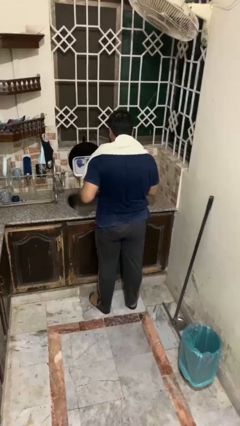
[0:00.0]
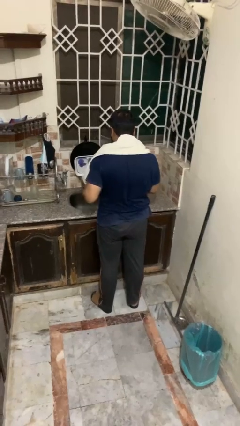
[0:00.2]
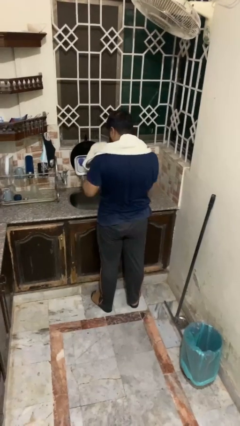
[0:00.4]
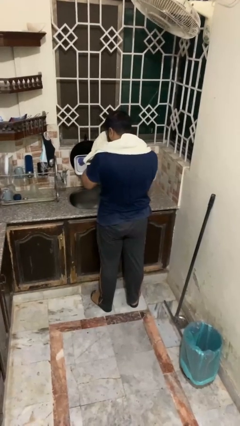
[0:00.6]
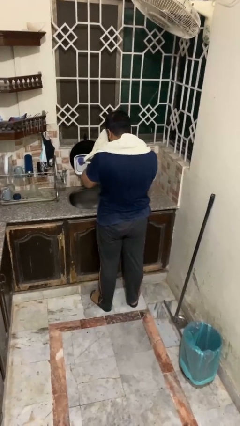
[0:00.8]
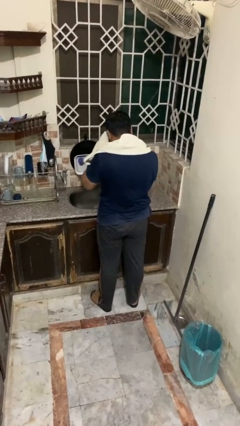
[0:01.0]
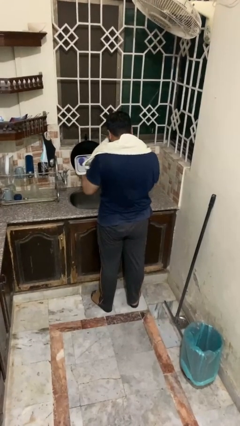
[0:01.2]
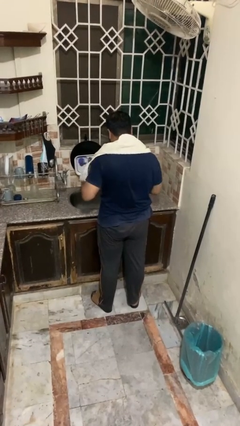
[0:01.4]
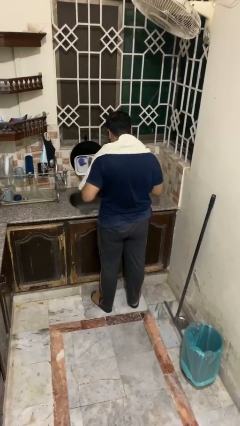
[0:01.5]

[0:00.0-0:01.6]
person dries face with towel

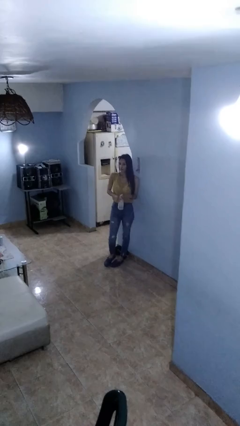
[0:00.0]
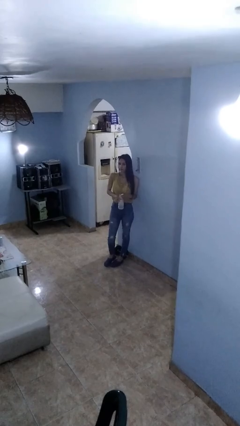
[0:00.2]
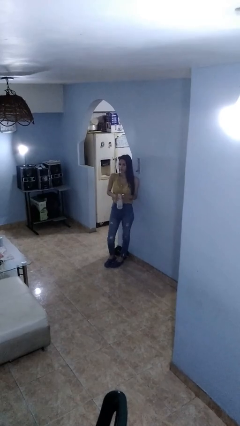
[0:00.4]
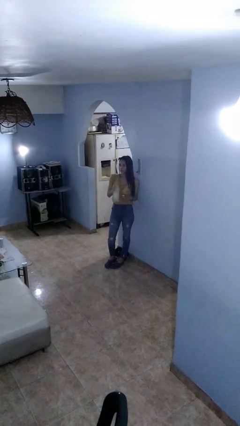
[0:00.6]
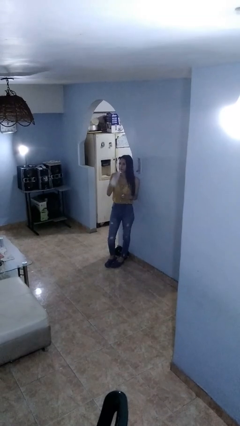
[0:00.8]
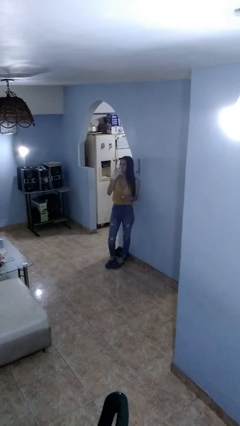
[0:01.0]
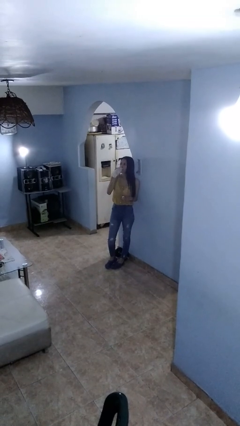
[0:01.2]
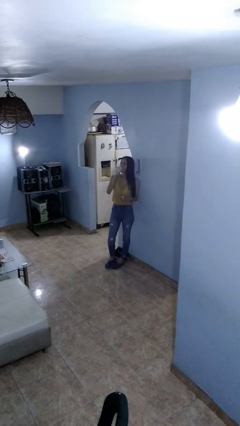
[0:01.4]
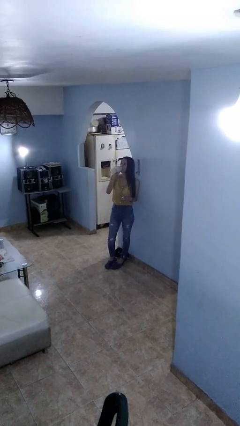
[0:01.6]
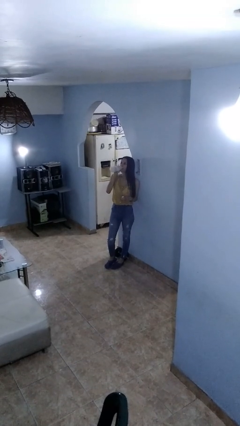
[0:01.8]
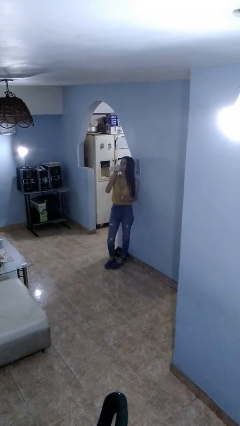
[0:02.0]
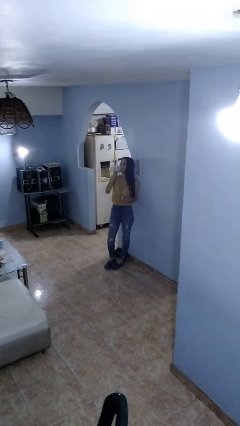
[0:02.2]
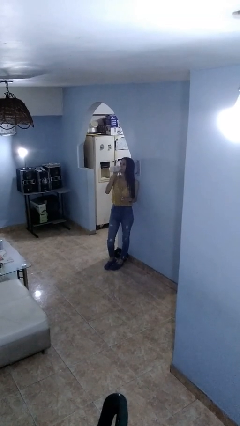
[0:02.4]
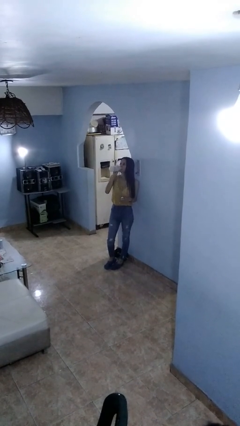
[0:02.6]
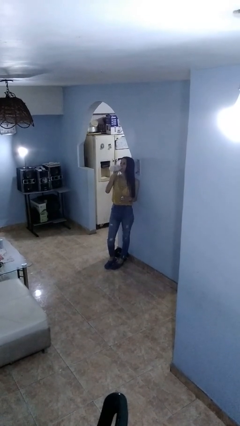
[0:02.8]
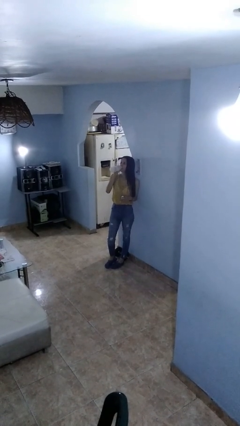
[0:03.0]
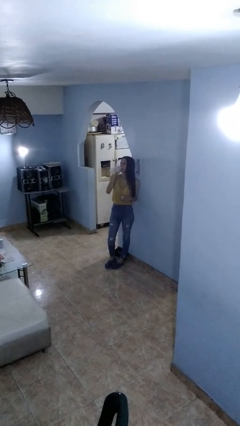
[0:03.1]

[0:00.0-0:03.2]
person drinks from bottle

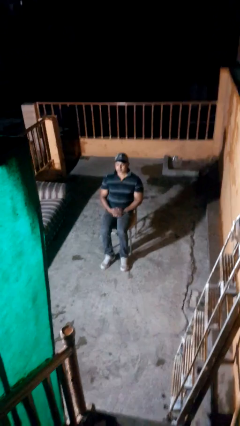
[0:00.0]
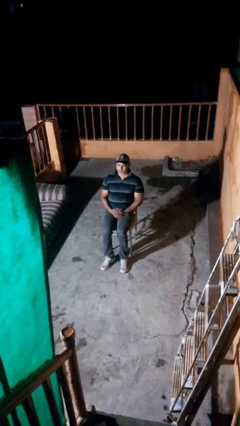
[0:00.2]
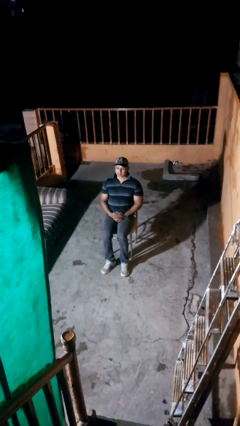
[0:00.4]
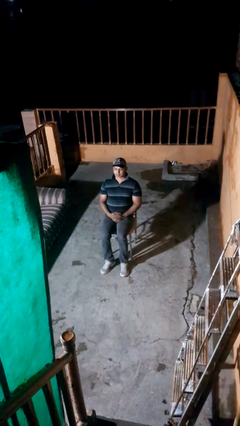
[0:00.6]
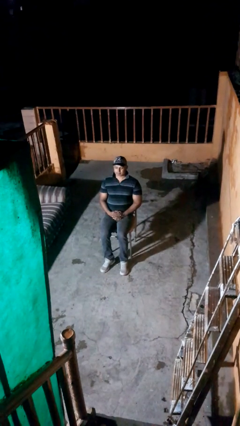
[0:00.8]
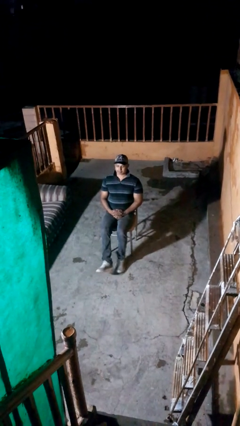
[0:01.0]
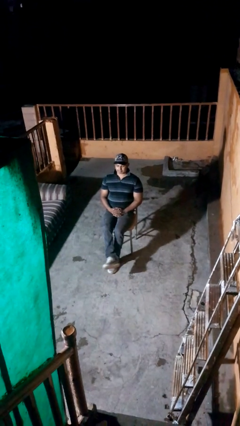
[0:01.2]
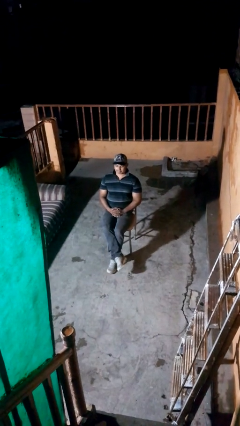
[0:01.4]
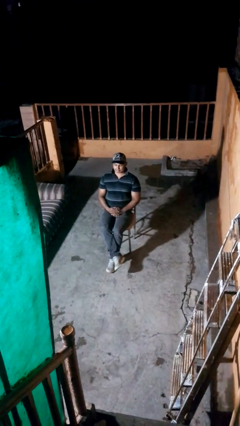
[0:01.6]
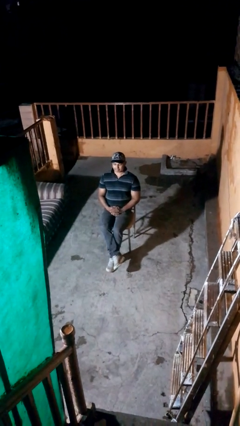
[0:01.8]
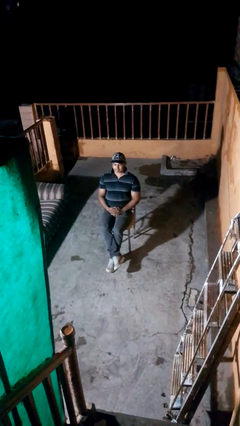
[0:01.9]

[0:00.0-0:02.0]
person crosses legs

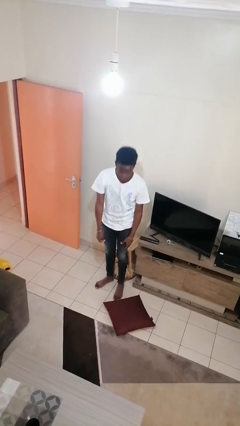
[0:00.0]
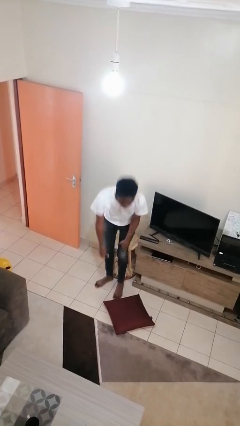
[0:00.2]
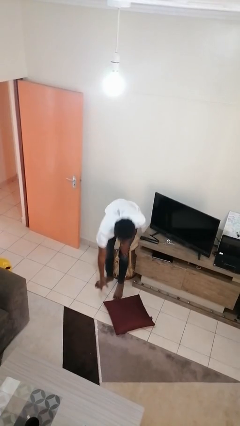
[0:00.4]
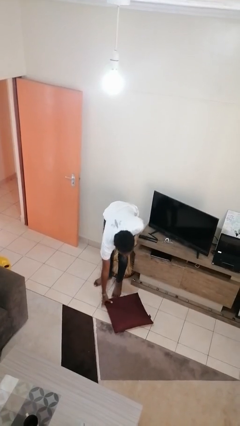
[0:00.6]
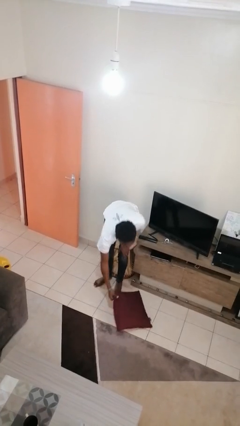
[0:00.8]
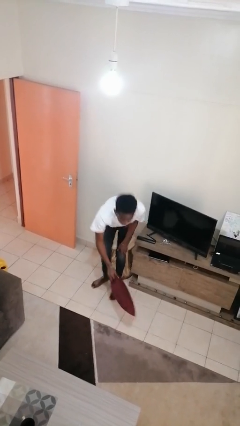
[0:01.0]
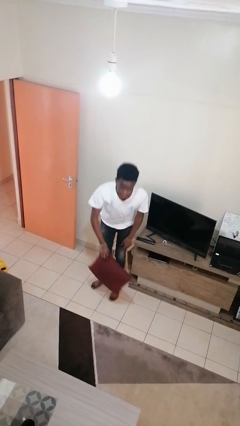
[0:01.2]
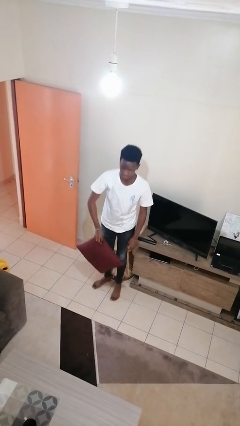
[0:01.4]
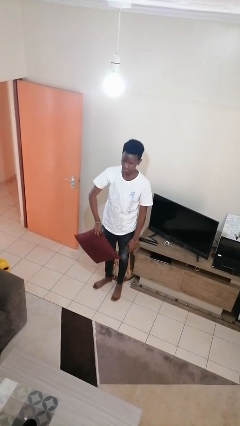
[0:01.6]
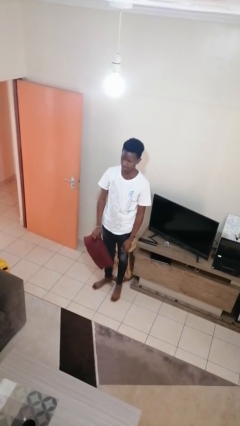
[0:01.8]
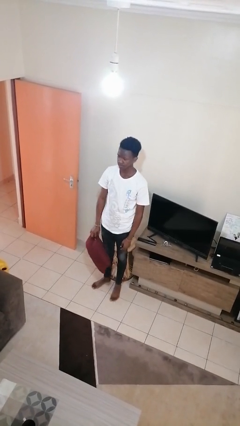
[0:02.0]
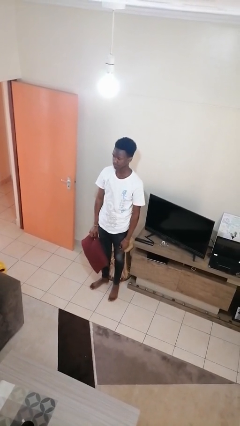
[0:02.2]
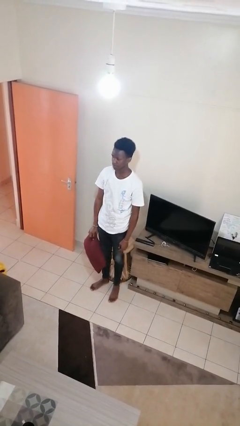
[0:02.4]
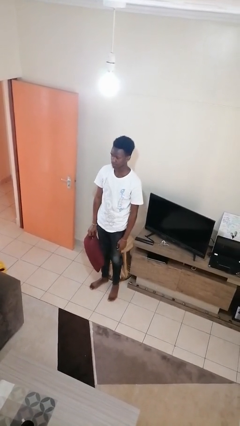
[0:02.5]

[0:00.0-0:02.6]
person picks up object from floor

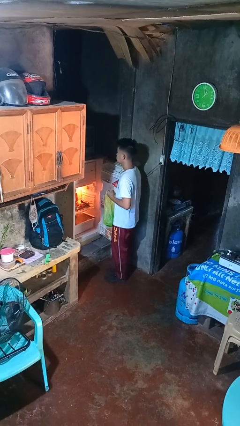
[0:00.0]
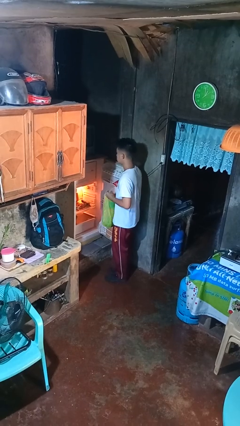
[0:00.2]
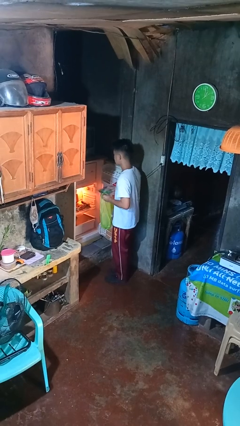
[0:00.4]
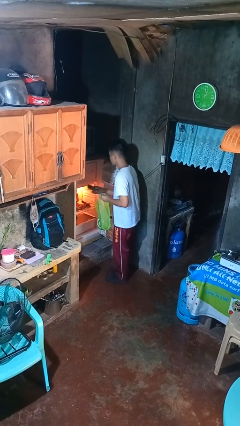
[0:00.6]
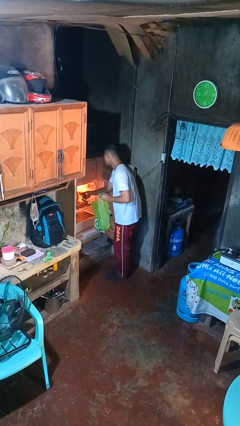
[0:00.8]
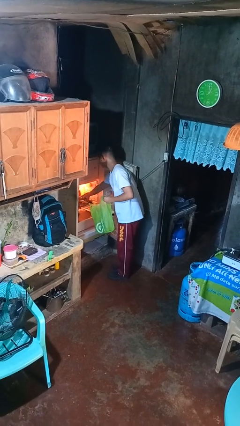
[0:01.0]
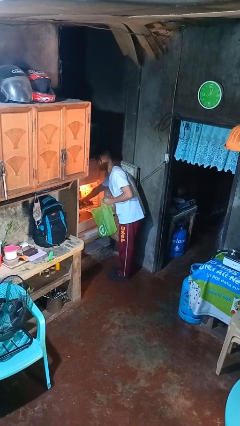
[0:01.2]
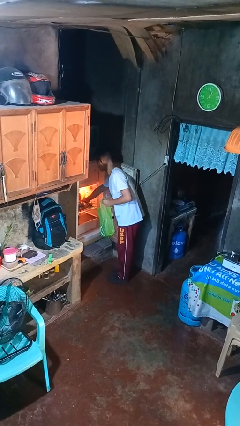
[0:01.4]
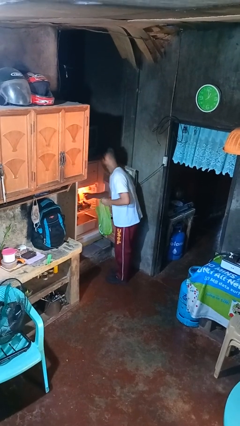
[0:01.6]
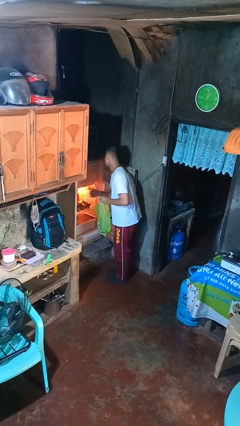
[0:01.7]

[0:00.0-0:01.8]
person loads groceries into refrigerator

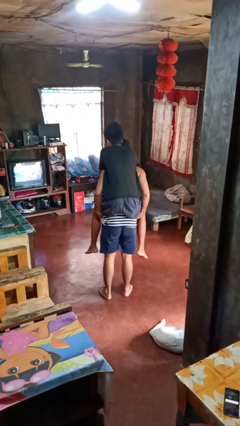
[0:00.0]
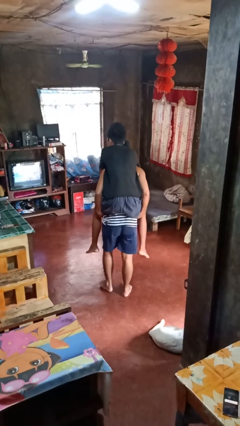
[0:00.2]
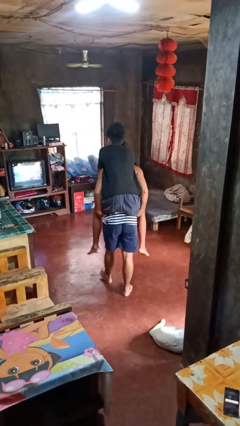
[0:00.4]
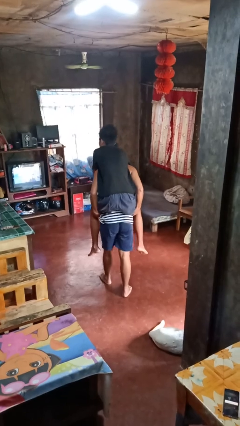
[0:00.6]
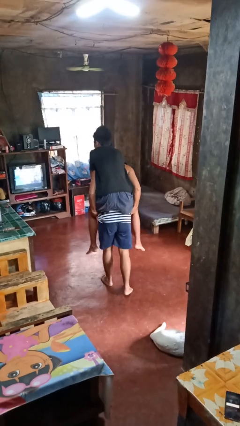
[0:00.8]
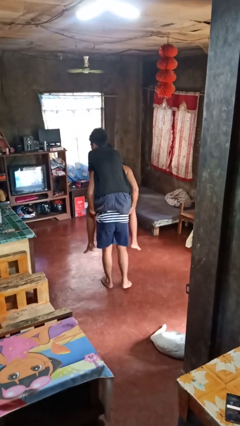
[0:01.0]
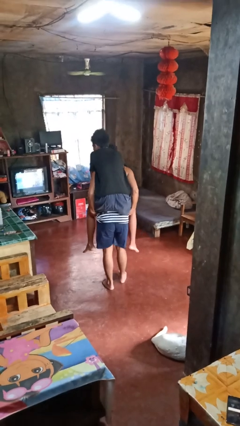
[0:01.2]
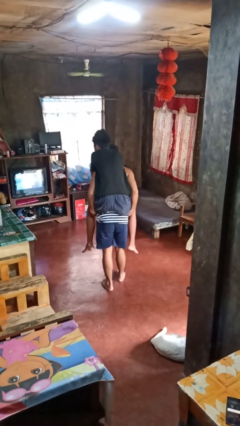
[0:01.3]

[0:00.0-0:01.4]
person carries person on back

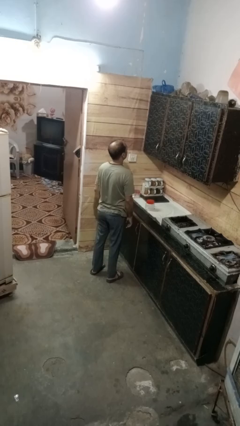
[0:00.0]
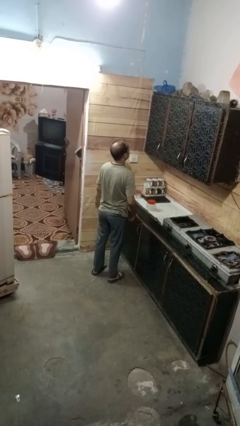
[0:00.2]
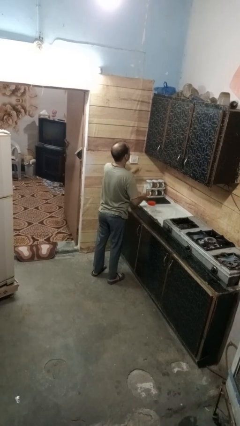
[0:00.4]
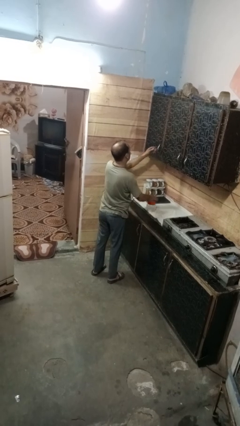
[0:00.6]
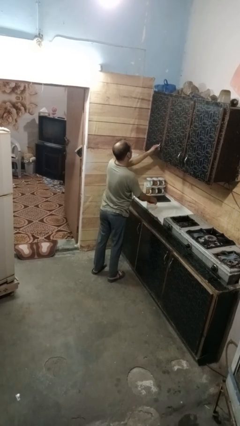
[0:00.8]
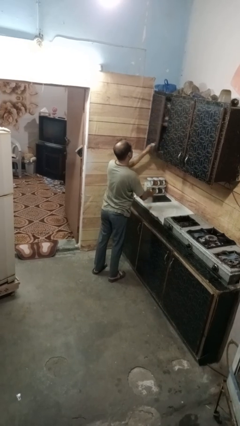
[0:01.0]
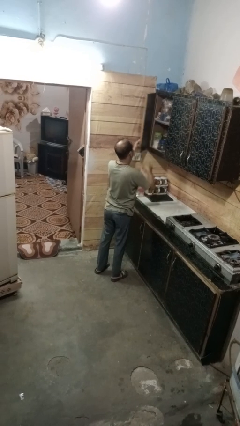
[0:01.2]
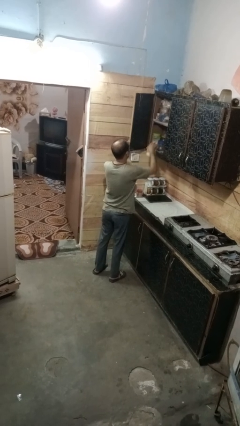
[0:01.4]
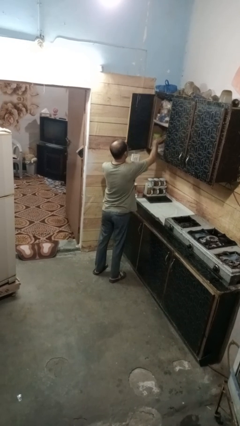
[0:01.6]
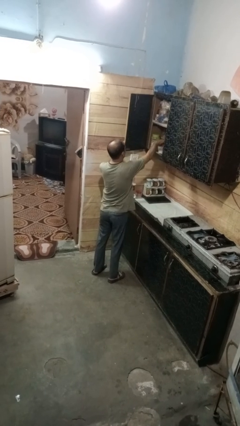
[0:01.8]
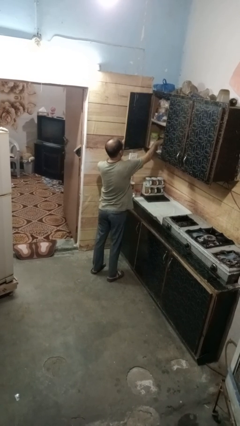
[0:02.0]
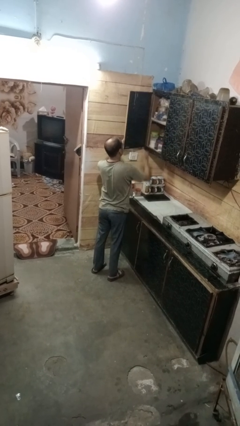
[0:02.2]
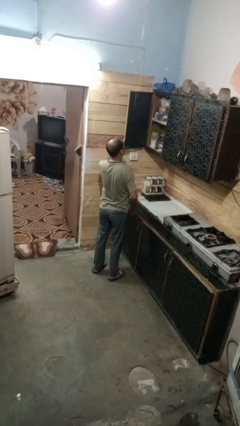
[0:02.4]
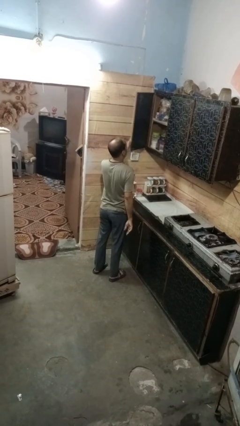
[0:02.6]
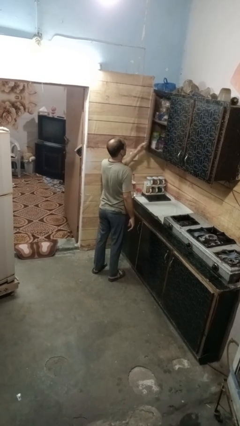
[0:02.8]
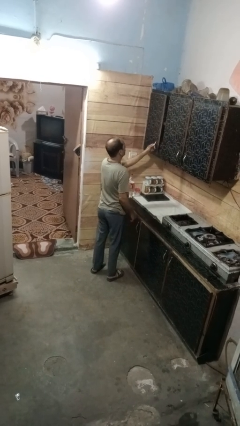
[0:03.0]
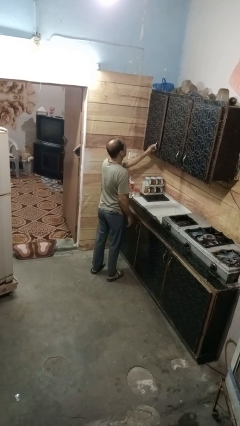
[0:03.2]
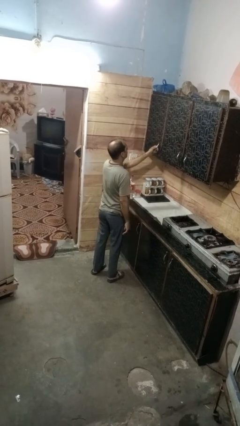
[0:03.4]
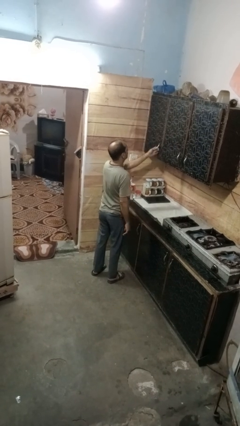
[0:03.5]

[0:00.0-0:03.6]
person puts object in cabinet

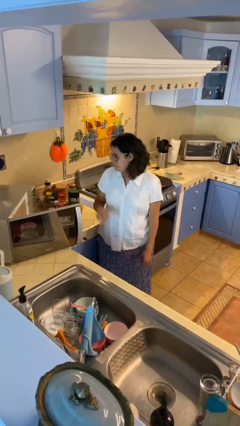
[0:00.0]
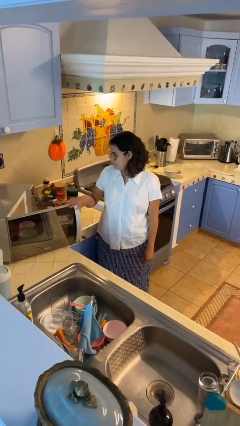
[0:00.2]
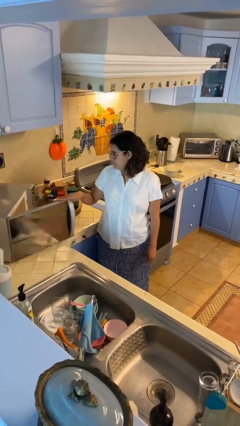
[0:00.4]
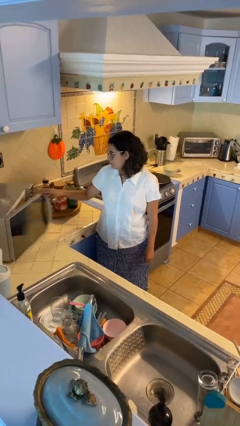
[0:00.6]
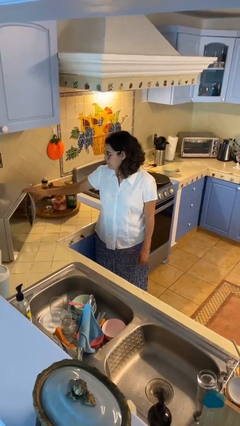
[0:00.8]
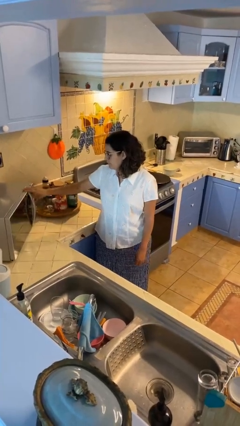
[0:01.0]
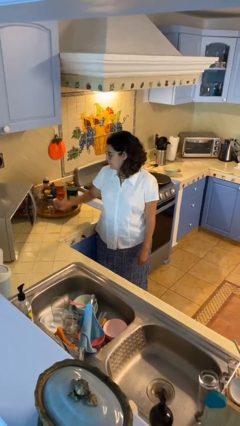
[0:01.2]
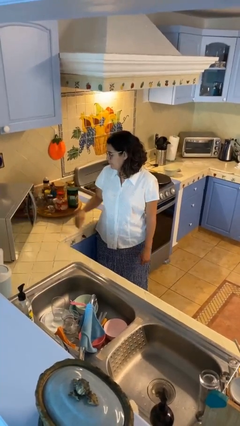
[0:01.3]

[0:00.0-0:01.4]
person closes microwave
